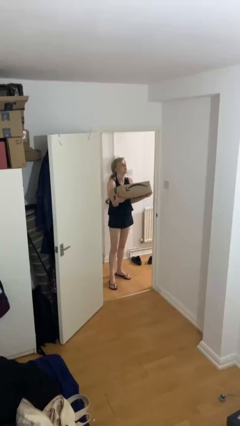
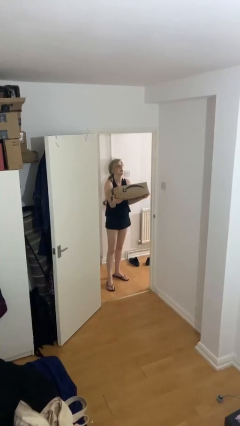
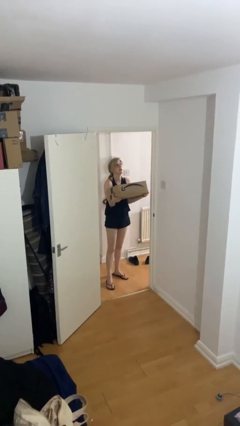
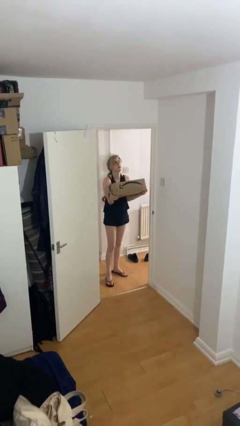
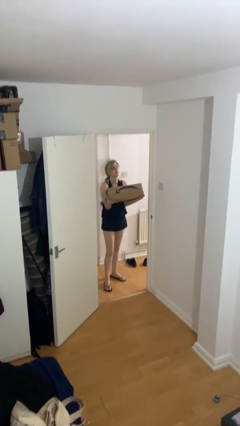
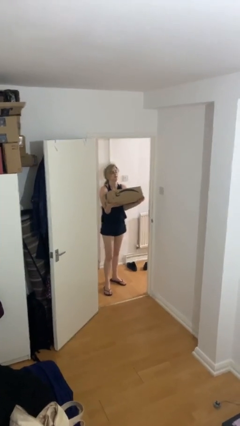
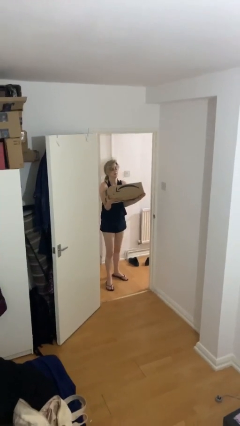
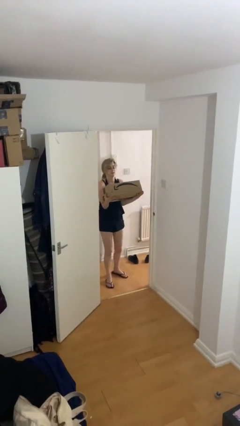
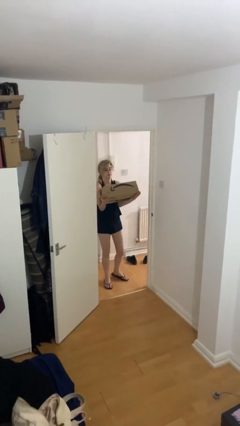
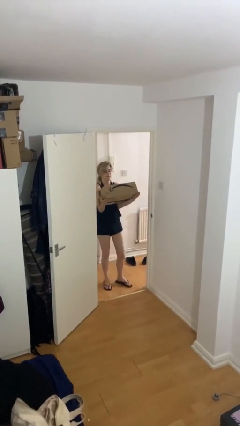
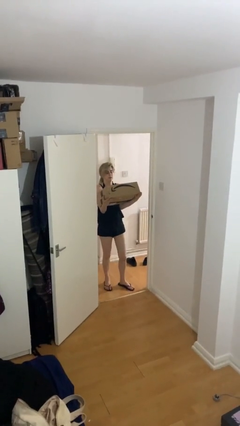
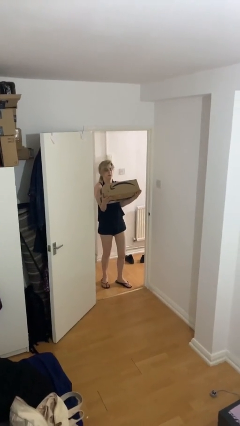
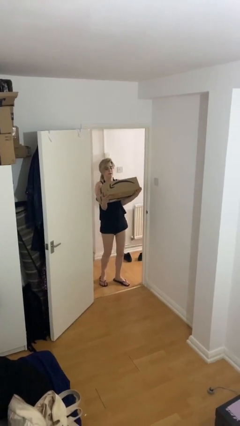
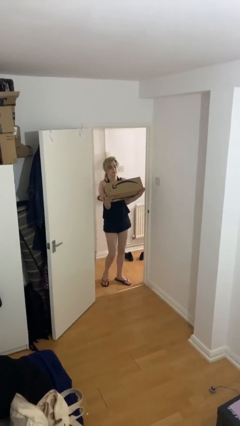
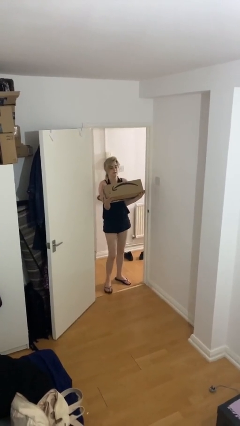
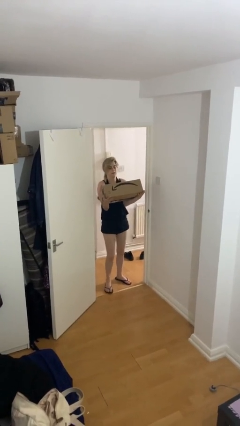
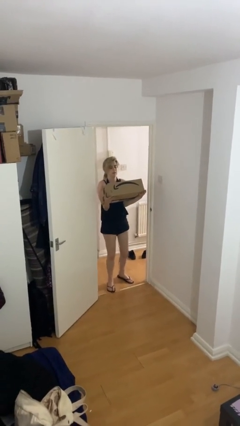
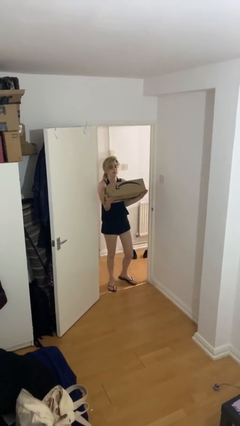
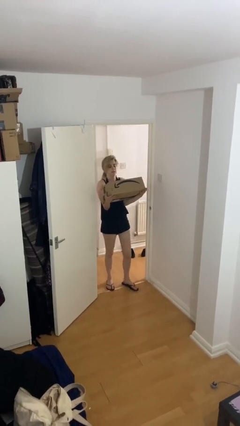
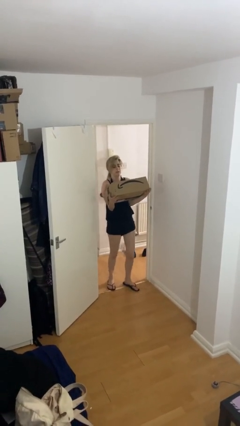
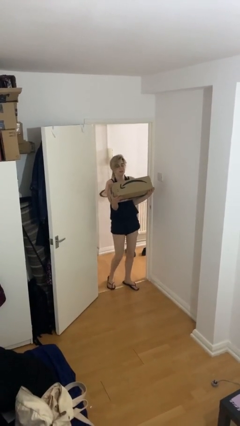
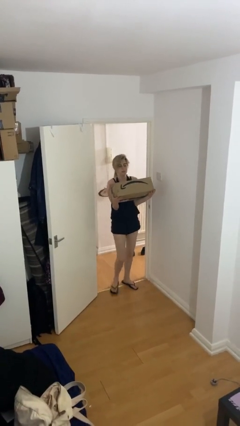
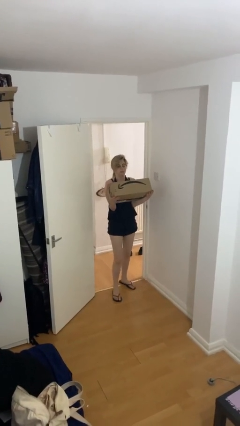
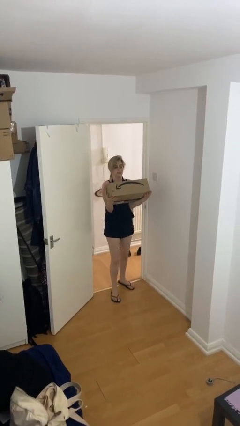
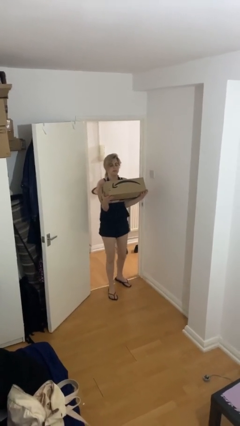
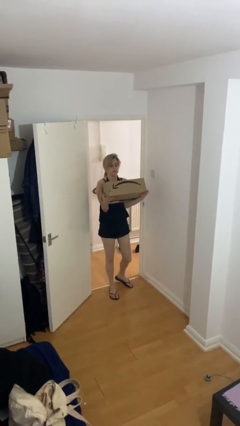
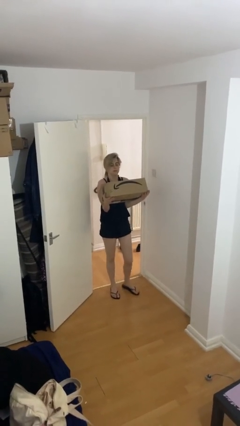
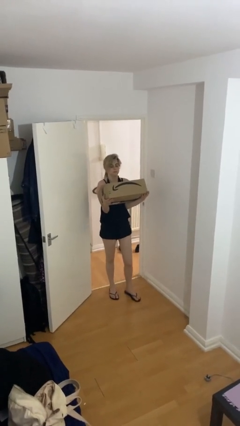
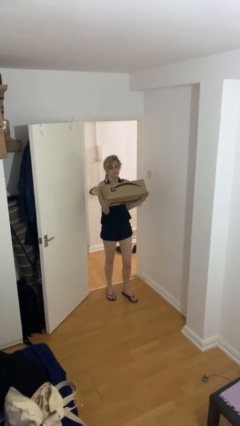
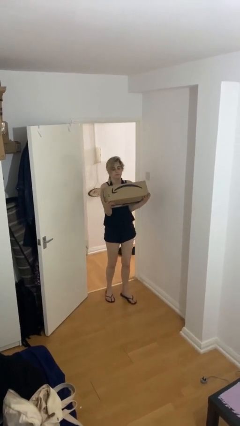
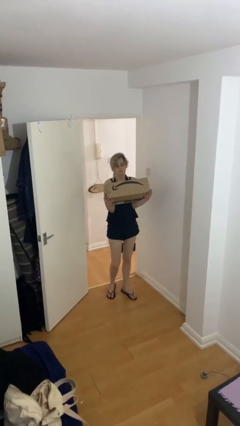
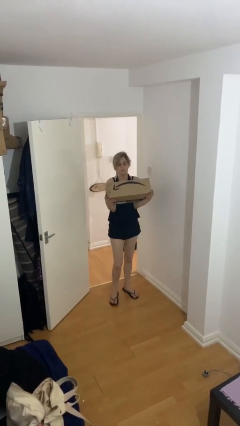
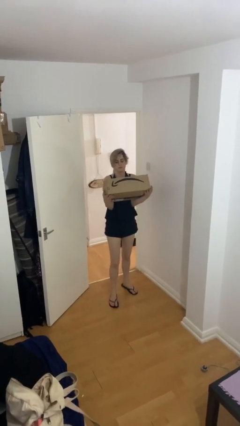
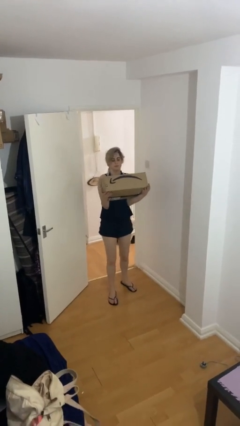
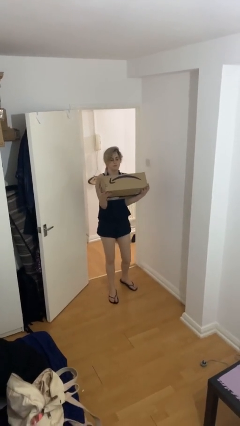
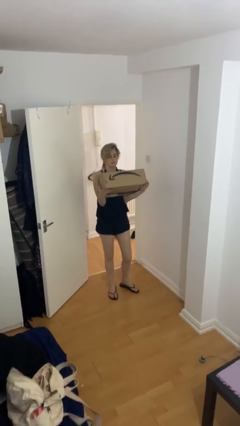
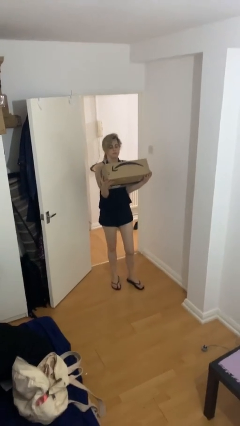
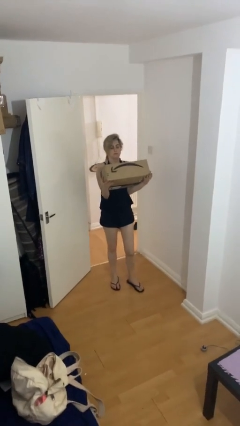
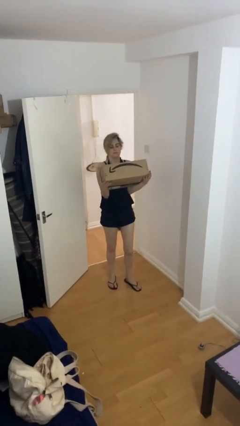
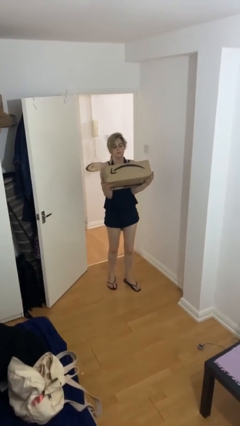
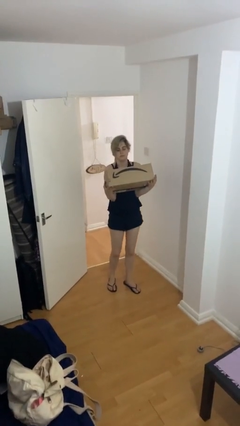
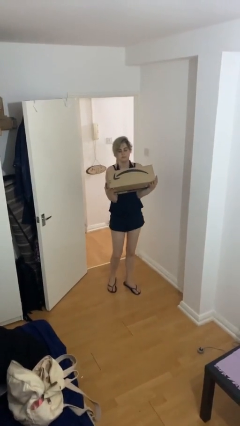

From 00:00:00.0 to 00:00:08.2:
person carries heavy object

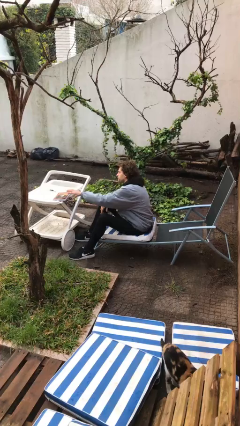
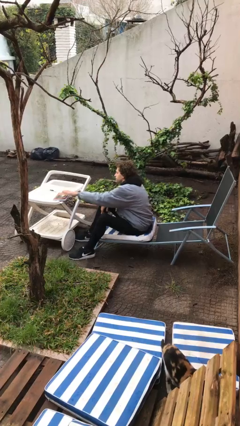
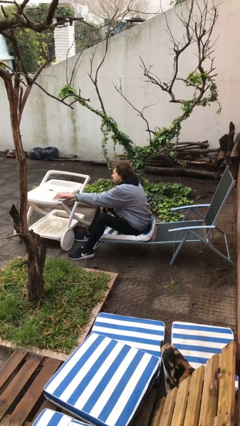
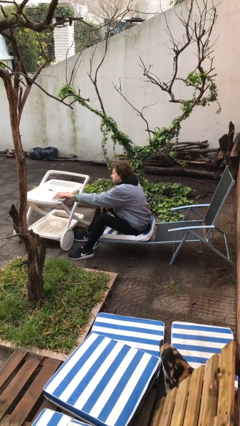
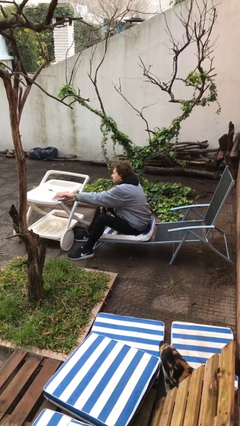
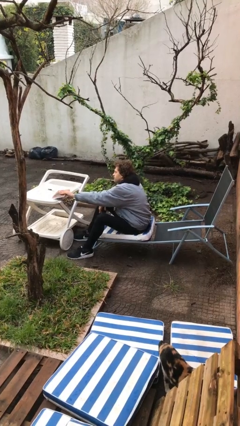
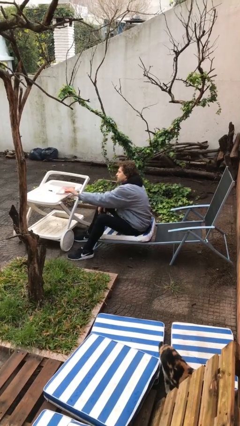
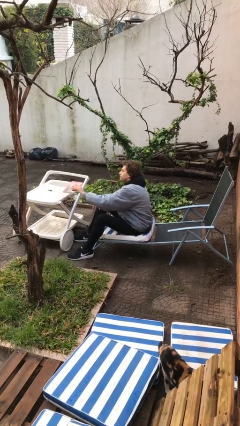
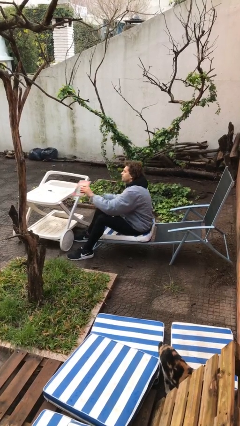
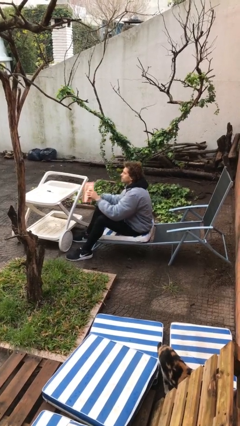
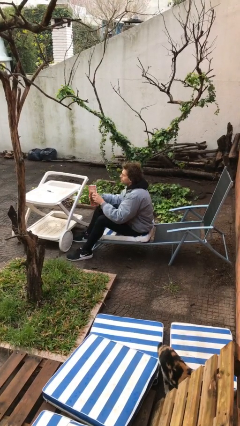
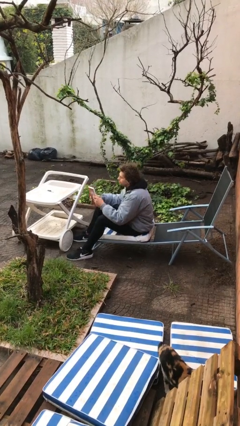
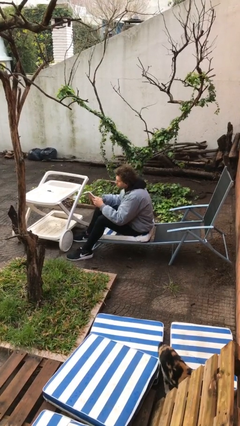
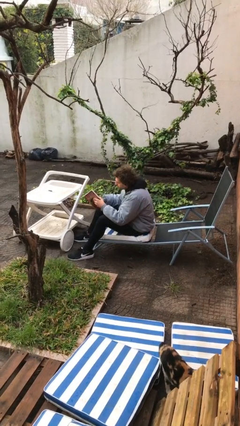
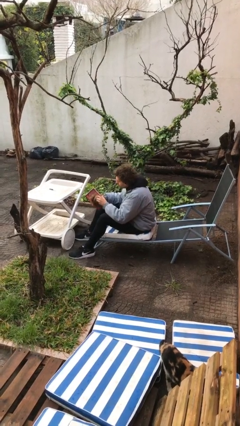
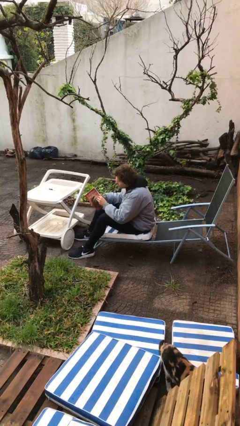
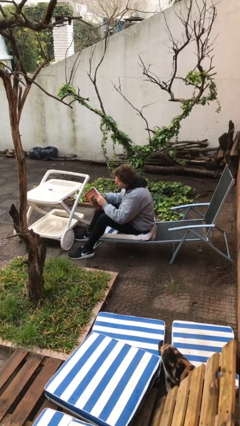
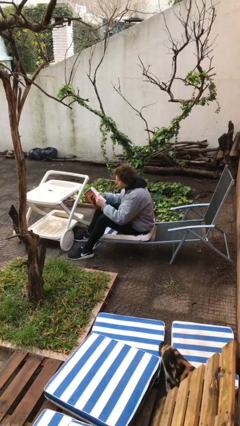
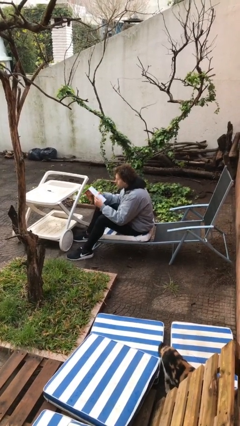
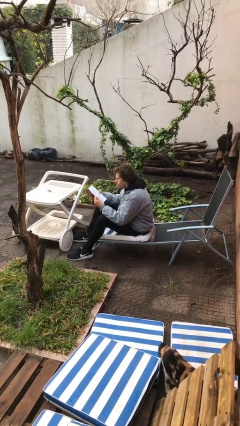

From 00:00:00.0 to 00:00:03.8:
person picks up object from table

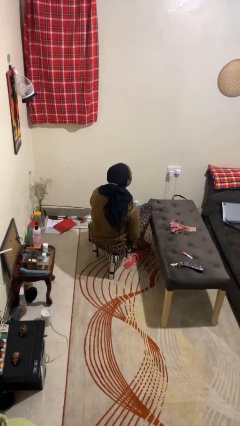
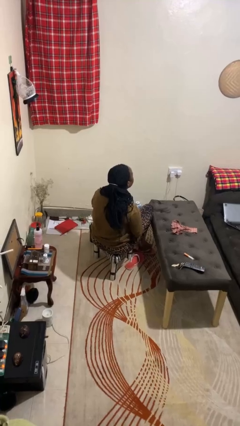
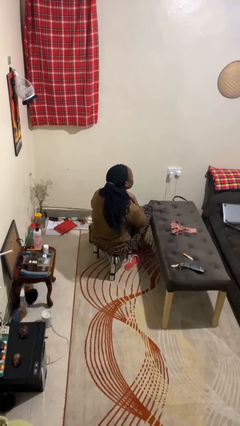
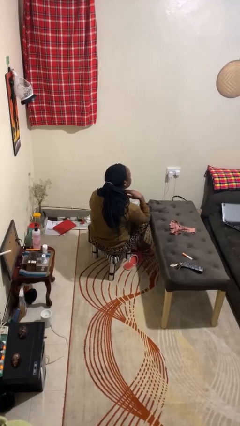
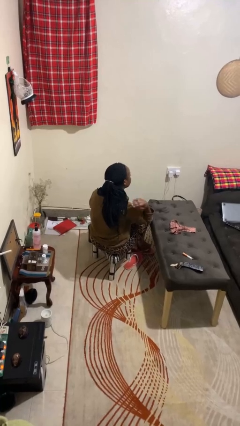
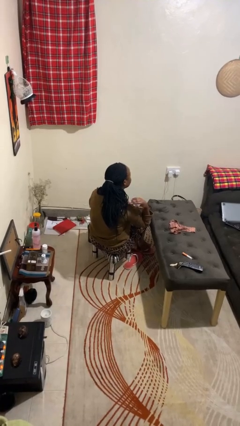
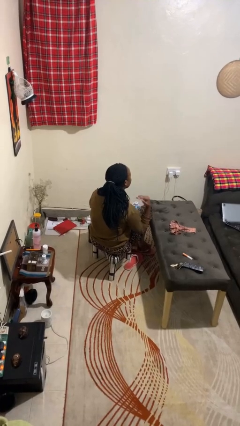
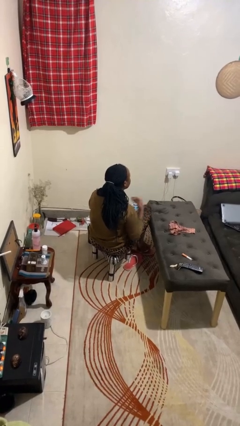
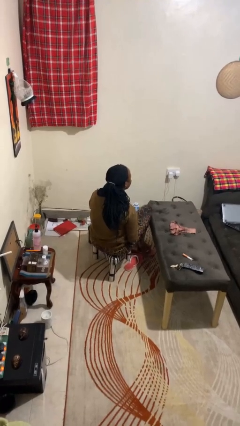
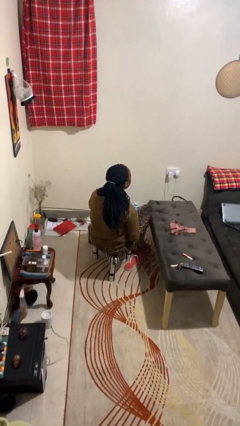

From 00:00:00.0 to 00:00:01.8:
person gestures cut

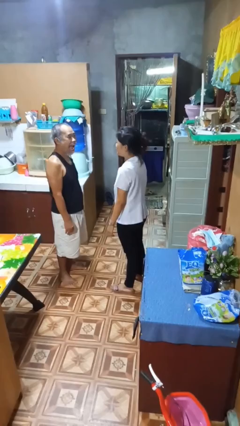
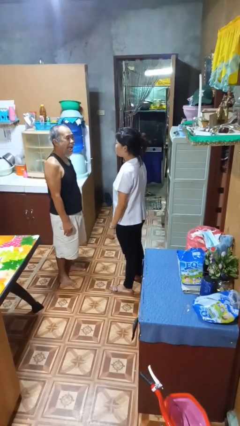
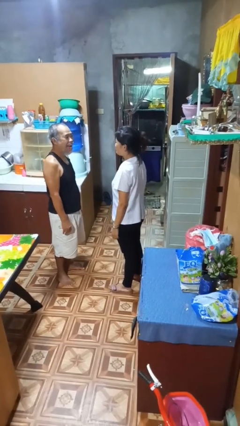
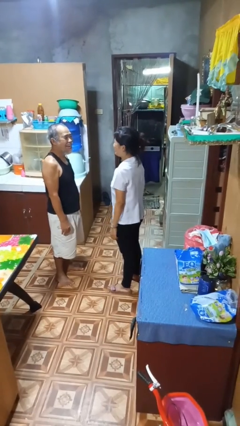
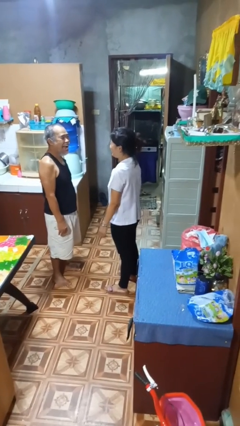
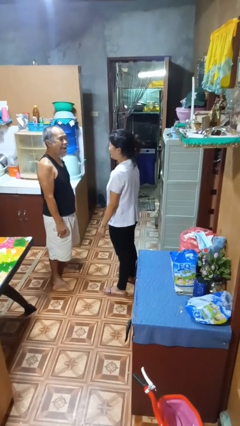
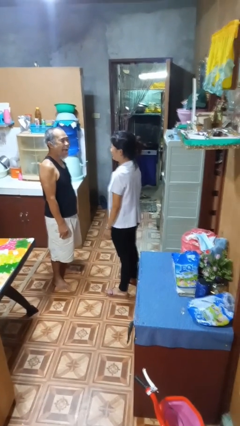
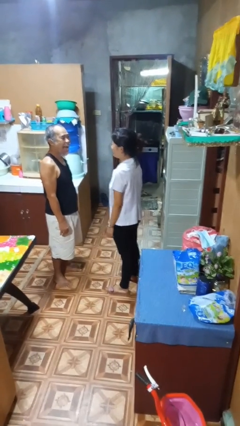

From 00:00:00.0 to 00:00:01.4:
person laughs with person

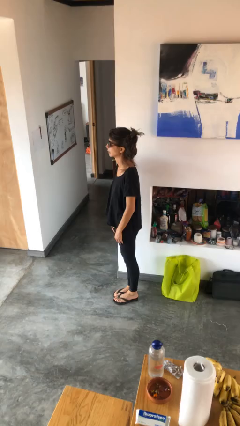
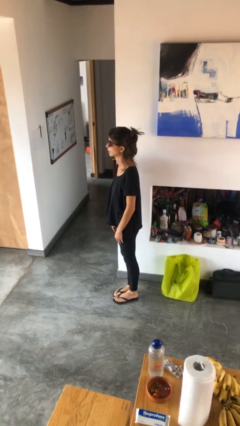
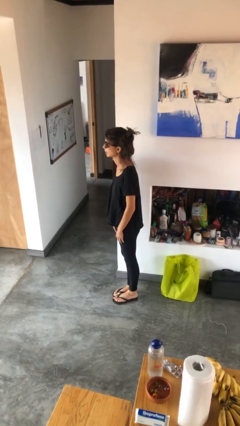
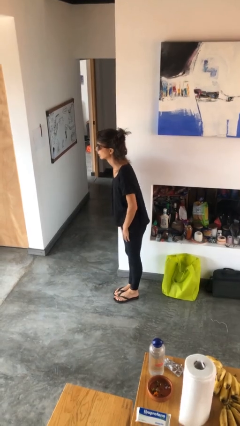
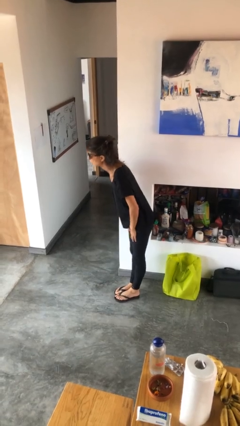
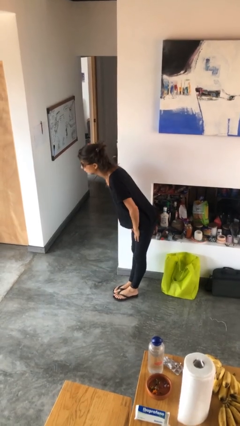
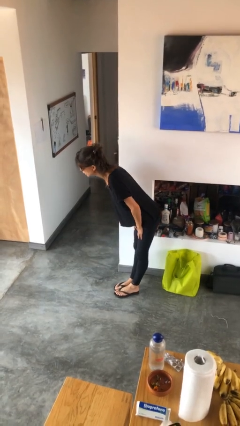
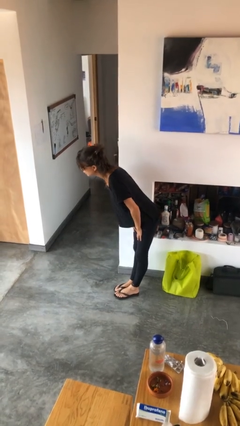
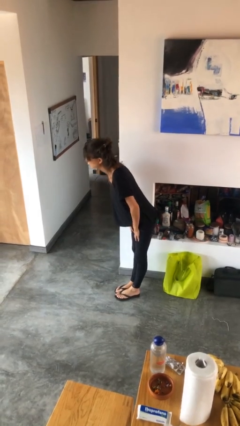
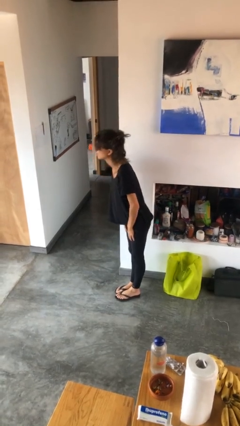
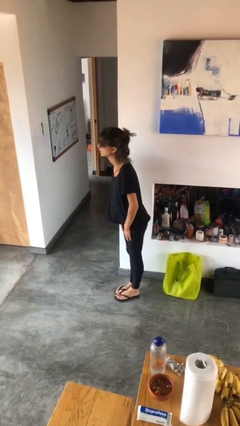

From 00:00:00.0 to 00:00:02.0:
person bows
